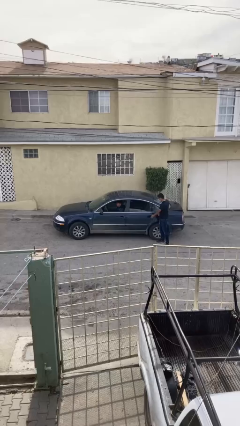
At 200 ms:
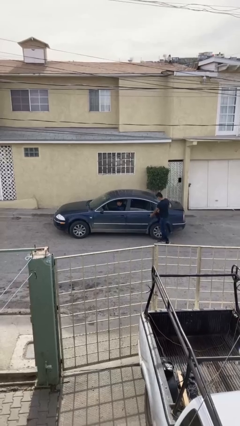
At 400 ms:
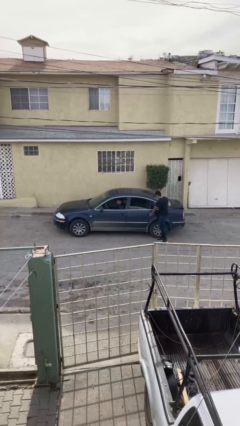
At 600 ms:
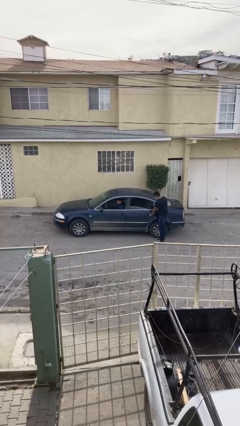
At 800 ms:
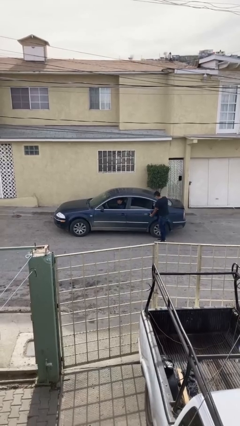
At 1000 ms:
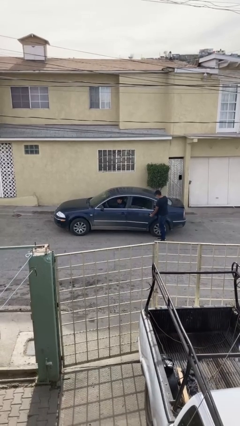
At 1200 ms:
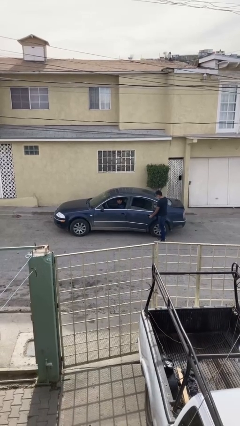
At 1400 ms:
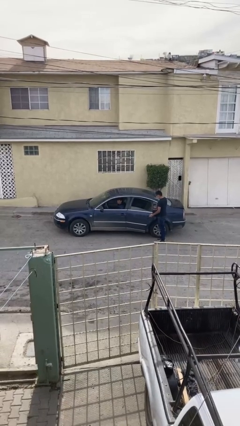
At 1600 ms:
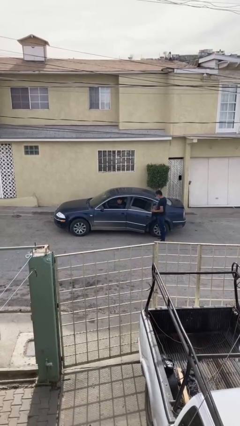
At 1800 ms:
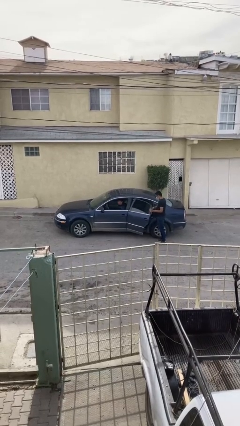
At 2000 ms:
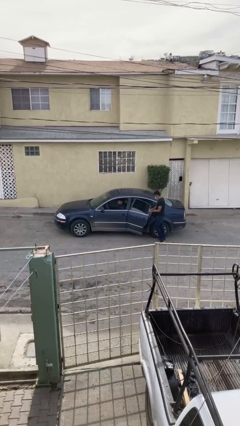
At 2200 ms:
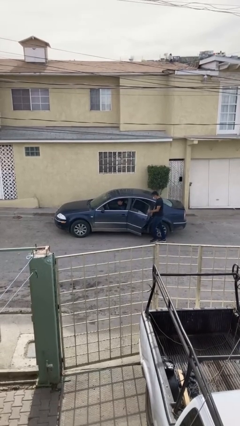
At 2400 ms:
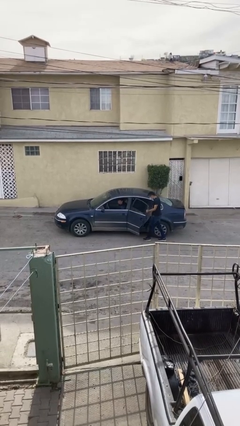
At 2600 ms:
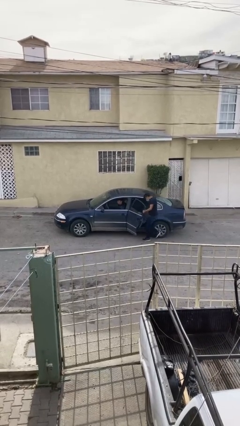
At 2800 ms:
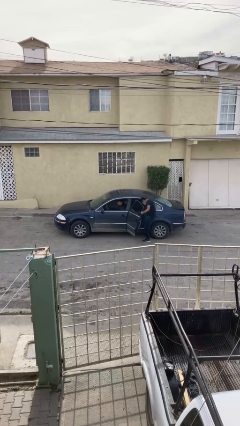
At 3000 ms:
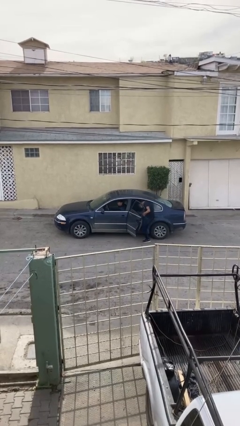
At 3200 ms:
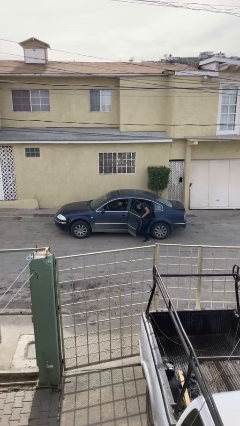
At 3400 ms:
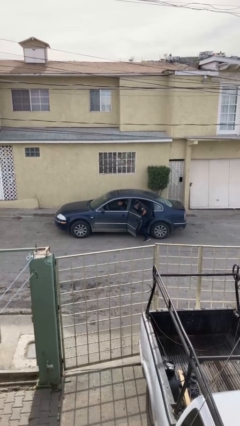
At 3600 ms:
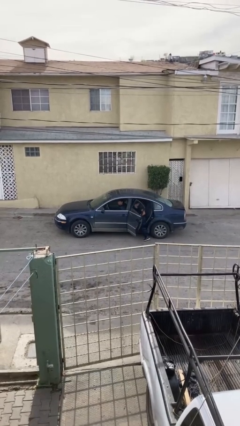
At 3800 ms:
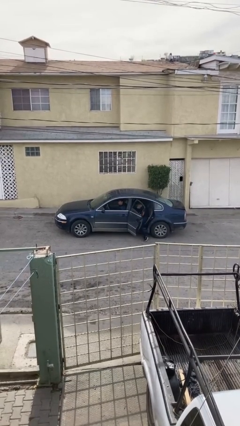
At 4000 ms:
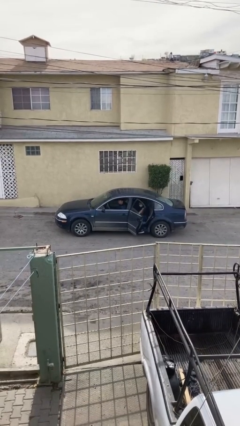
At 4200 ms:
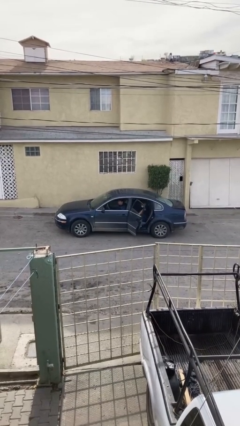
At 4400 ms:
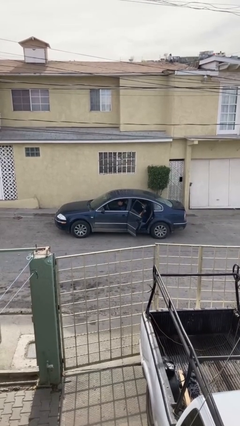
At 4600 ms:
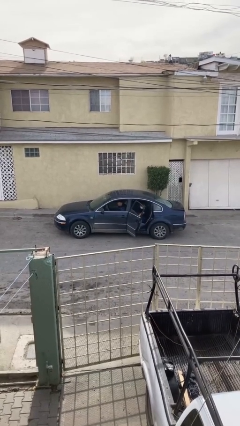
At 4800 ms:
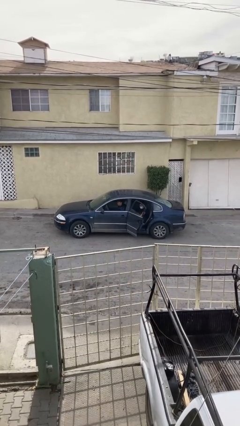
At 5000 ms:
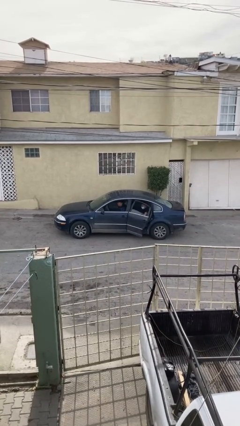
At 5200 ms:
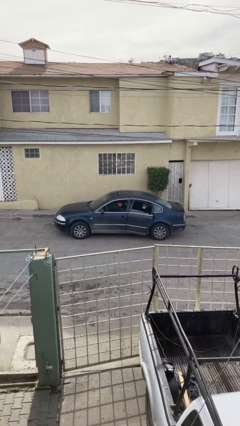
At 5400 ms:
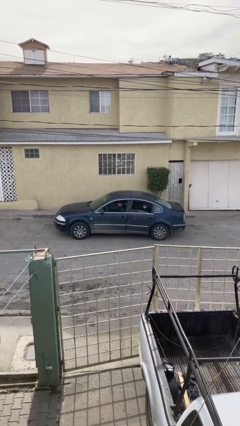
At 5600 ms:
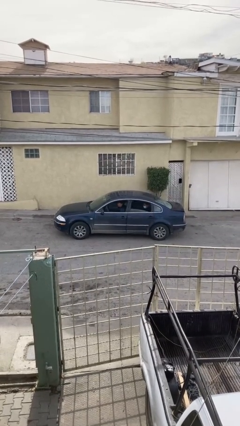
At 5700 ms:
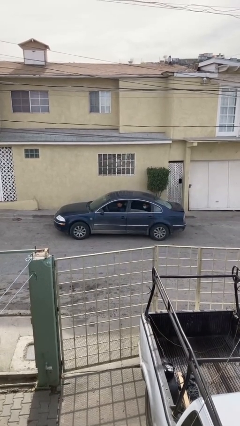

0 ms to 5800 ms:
car picks up person

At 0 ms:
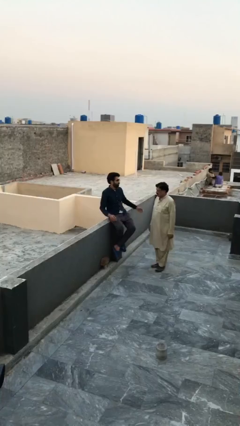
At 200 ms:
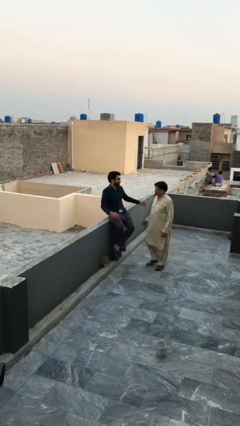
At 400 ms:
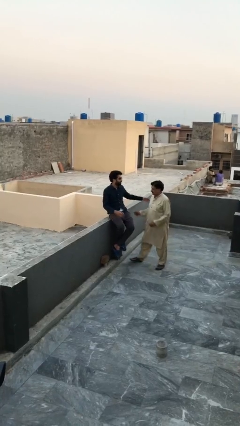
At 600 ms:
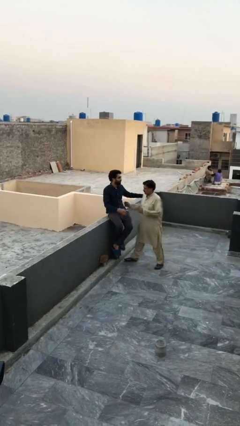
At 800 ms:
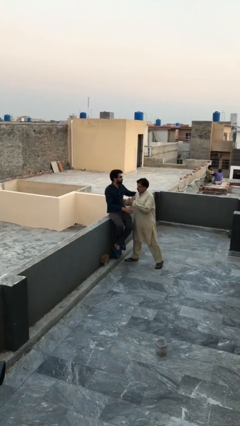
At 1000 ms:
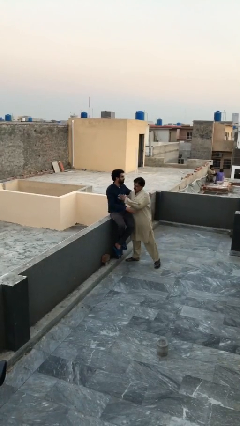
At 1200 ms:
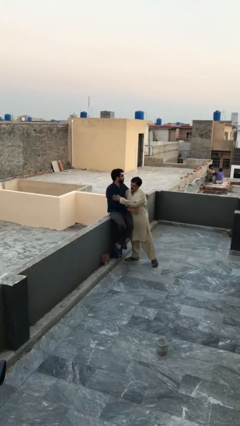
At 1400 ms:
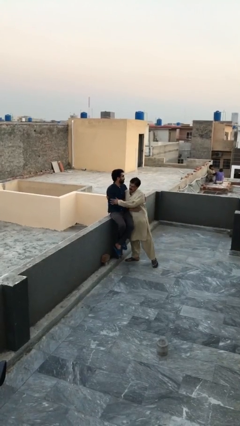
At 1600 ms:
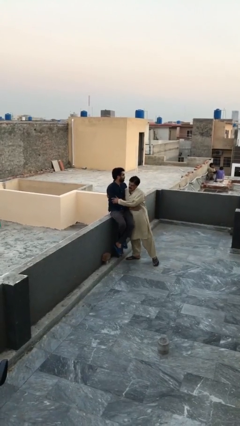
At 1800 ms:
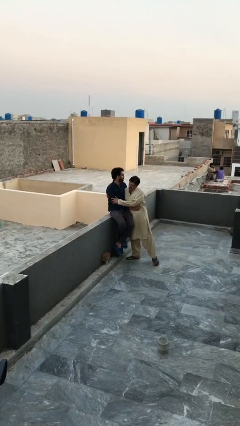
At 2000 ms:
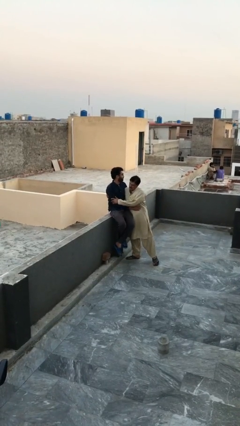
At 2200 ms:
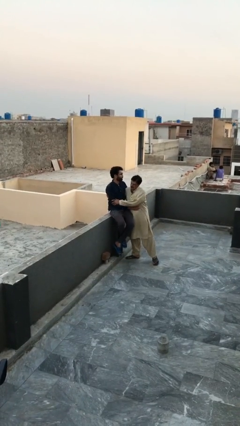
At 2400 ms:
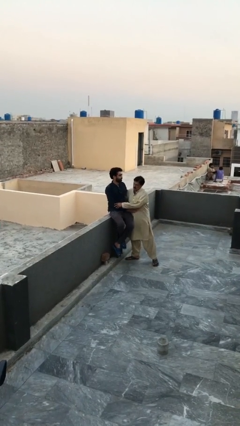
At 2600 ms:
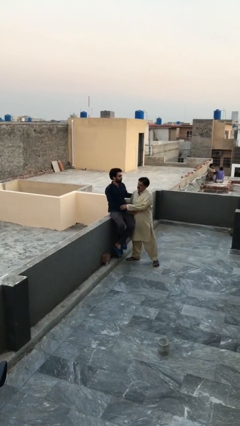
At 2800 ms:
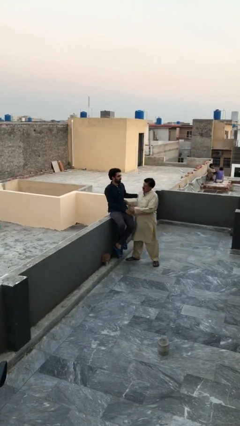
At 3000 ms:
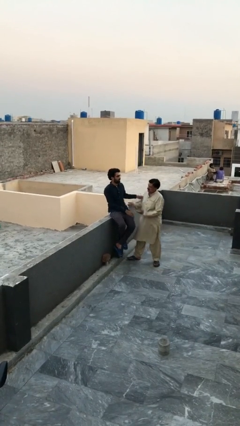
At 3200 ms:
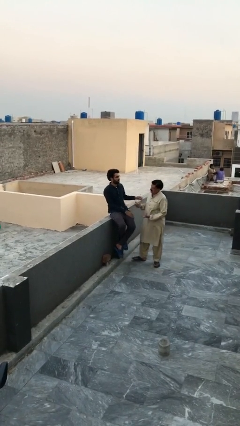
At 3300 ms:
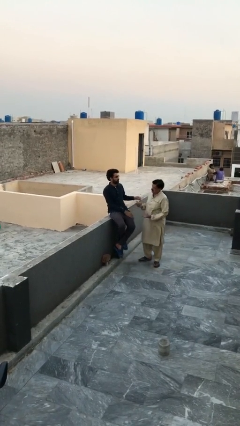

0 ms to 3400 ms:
person embraces person

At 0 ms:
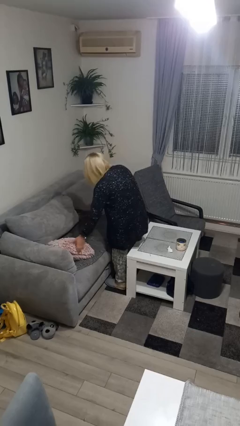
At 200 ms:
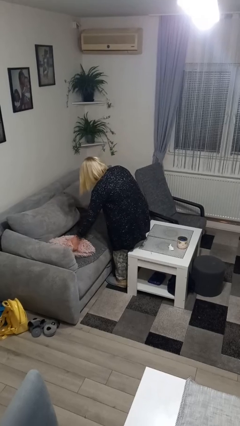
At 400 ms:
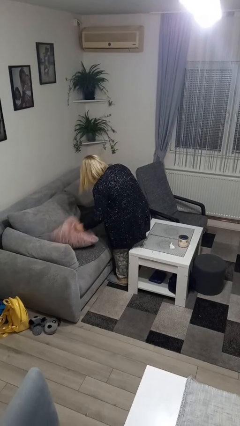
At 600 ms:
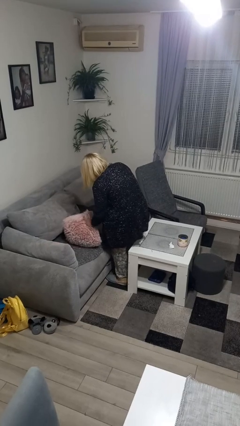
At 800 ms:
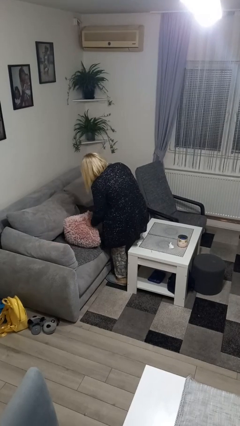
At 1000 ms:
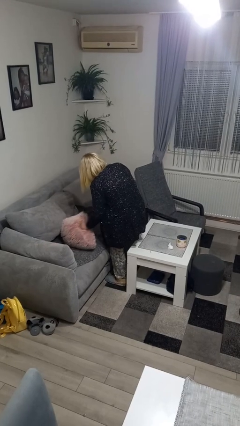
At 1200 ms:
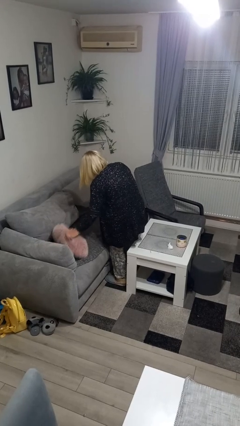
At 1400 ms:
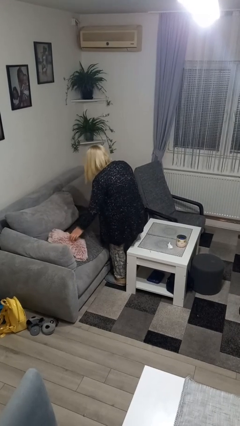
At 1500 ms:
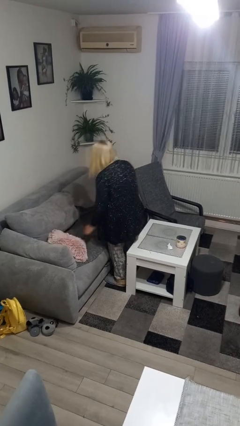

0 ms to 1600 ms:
person searches in couch

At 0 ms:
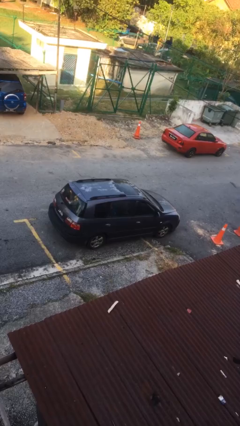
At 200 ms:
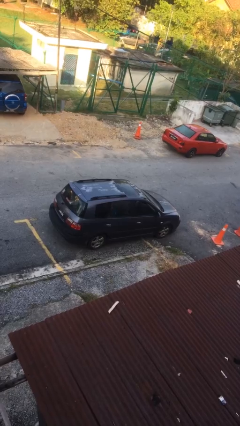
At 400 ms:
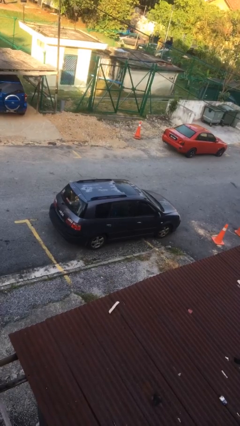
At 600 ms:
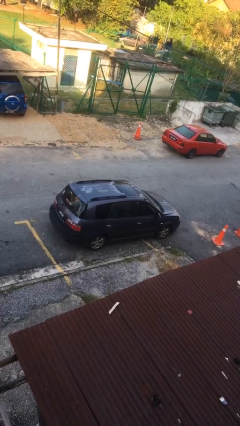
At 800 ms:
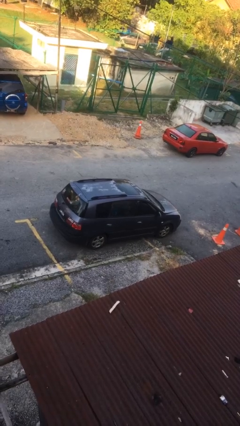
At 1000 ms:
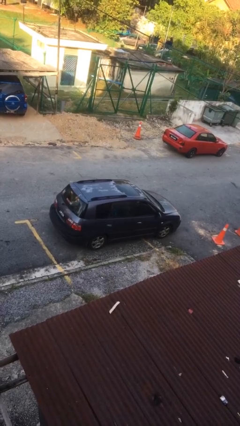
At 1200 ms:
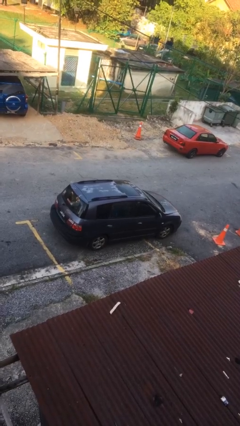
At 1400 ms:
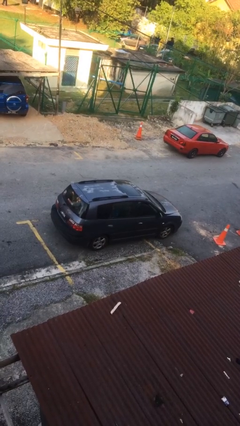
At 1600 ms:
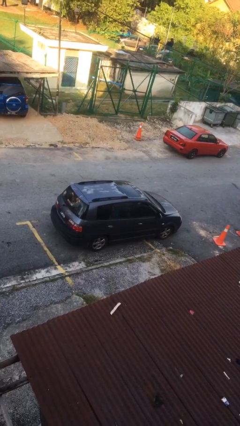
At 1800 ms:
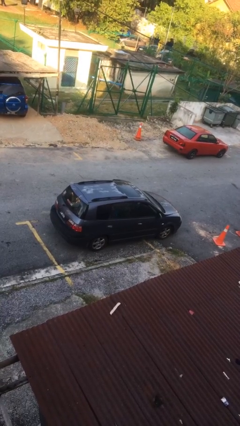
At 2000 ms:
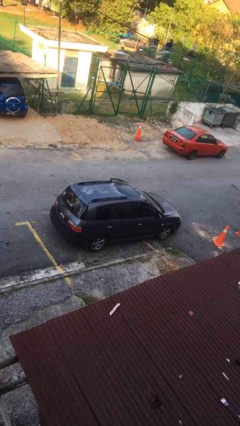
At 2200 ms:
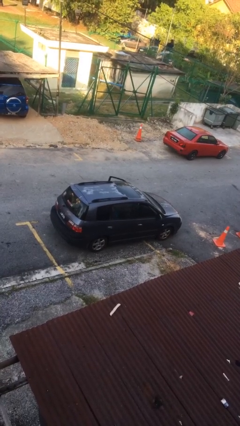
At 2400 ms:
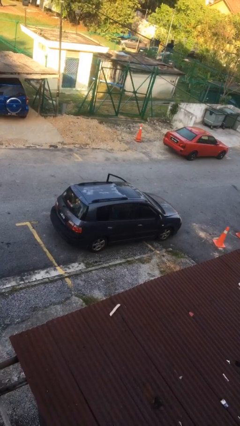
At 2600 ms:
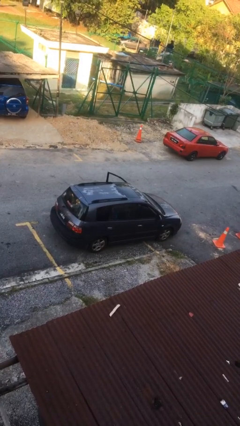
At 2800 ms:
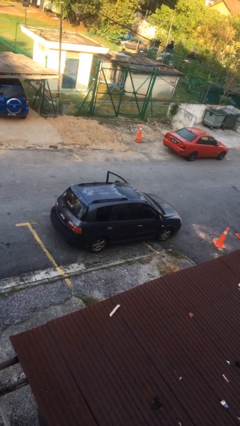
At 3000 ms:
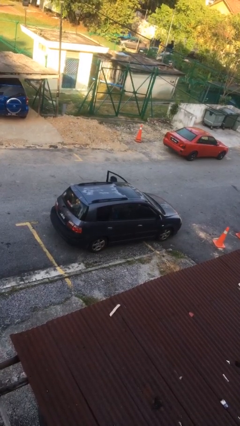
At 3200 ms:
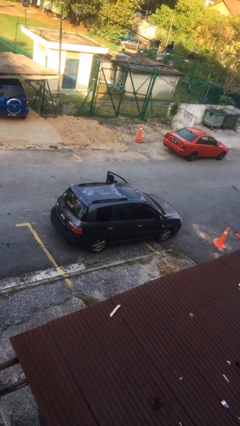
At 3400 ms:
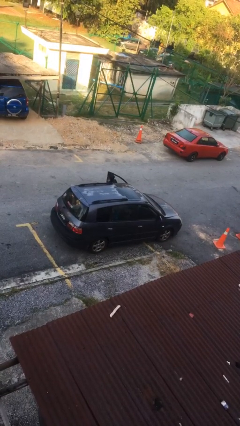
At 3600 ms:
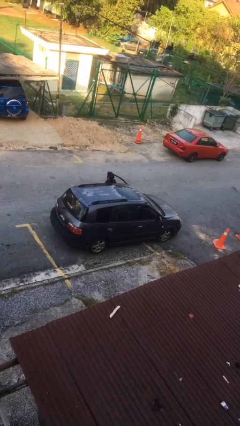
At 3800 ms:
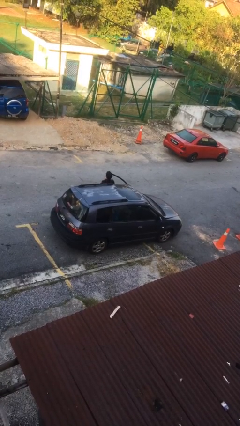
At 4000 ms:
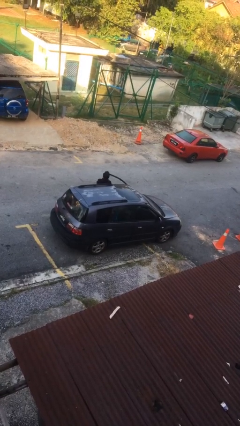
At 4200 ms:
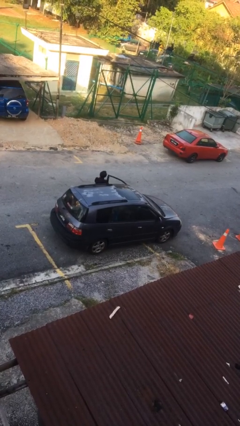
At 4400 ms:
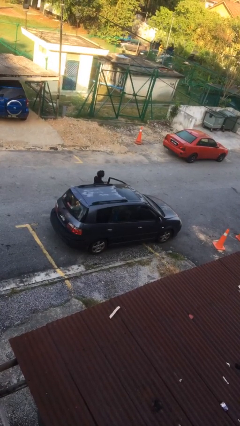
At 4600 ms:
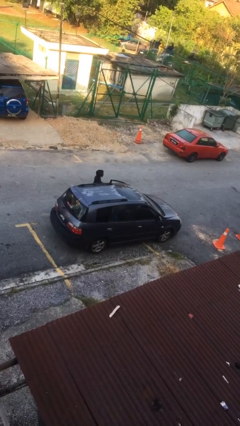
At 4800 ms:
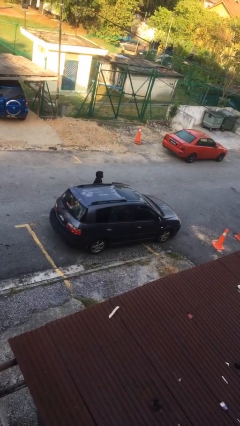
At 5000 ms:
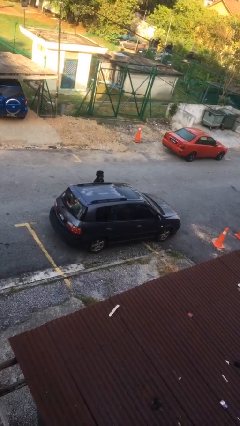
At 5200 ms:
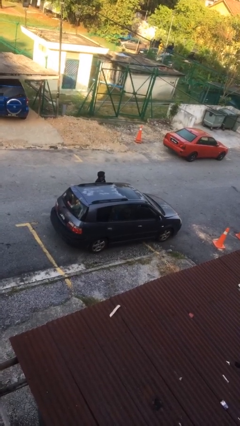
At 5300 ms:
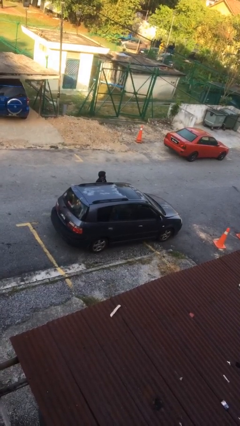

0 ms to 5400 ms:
car drops off person

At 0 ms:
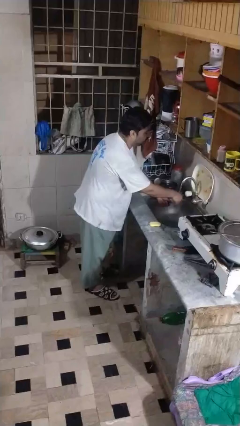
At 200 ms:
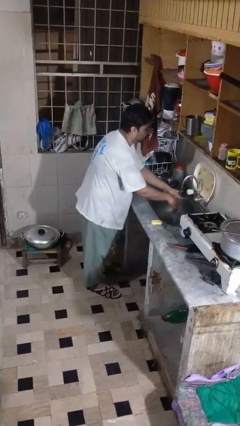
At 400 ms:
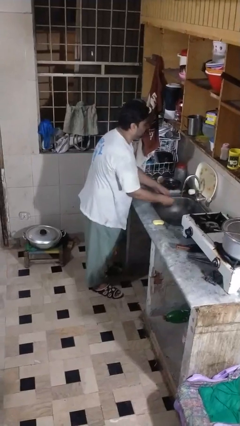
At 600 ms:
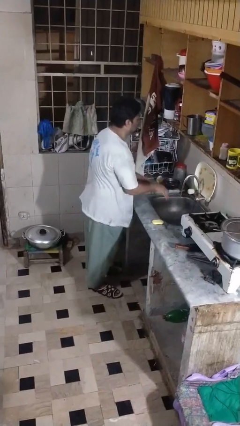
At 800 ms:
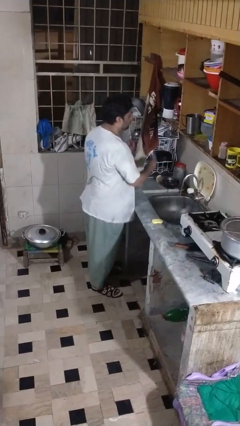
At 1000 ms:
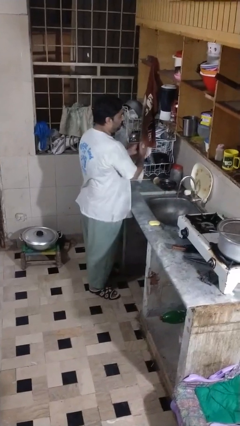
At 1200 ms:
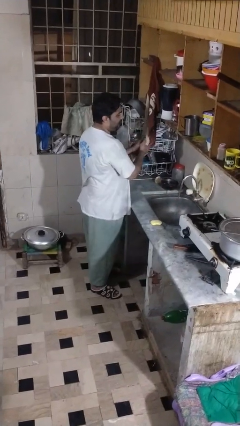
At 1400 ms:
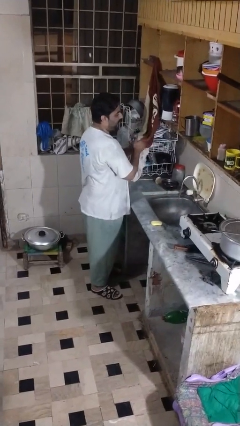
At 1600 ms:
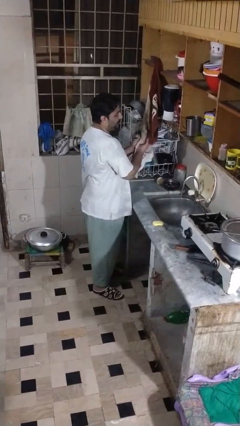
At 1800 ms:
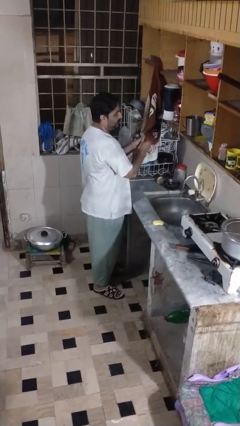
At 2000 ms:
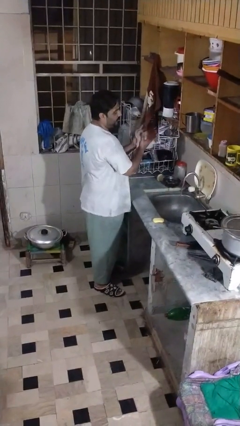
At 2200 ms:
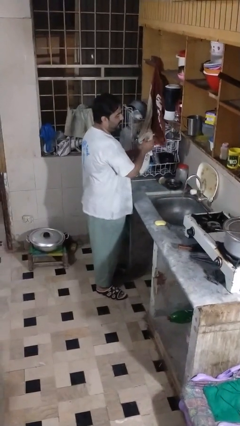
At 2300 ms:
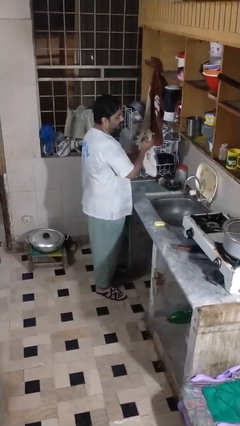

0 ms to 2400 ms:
person dries hands with towel
